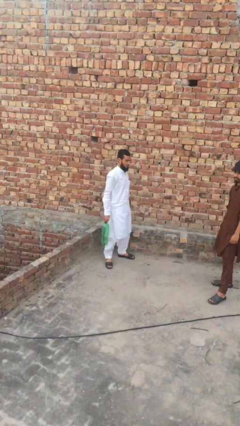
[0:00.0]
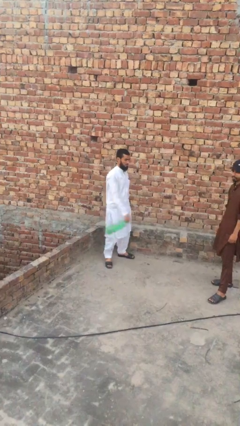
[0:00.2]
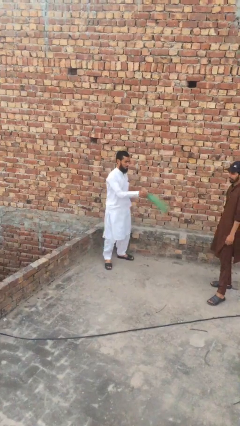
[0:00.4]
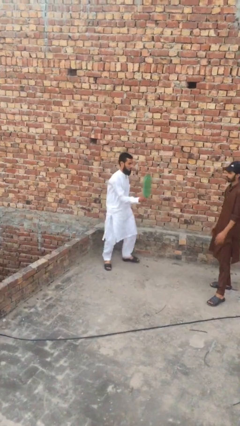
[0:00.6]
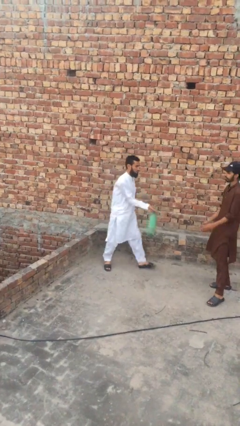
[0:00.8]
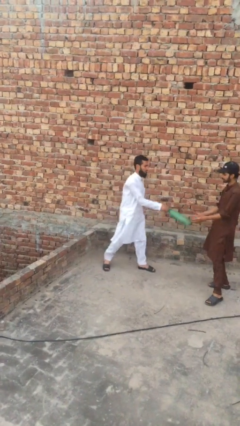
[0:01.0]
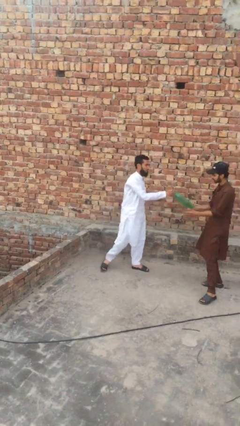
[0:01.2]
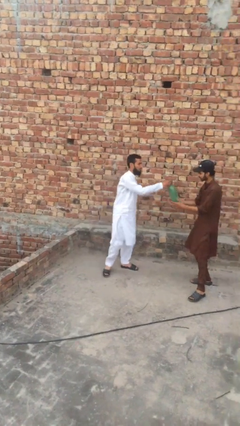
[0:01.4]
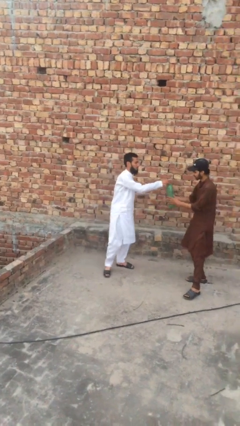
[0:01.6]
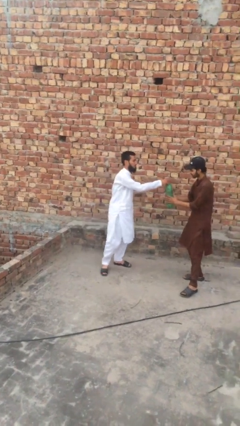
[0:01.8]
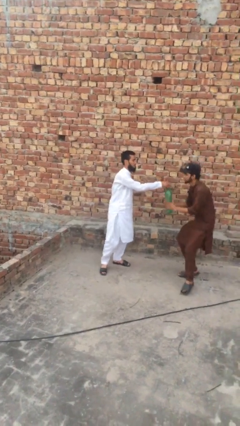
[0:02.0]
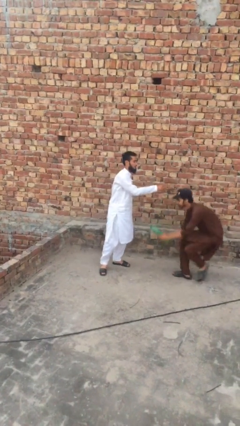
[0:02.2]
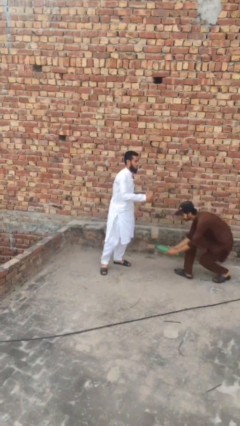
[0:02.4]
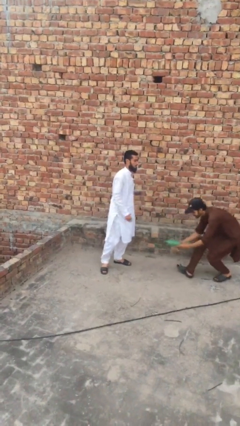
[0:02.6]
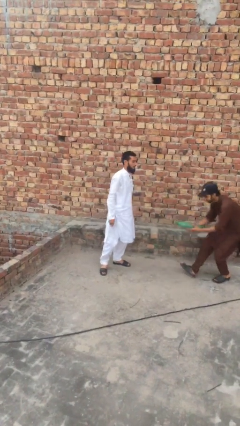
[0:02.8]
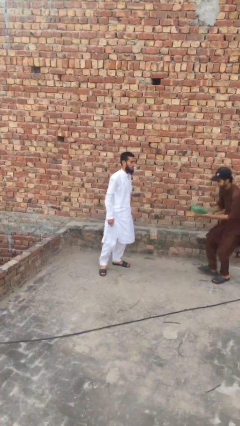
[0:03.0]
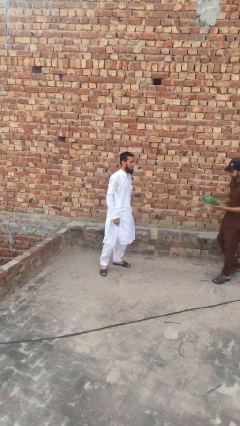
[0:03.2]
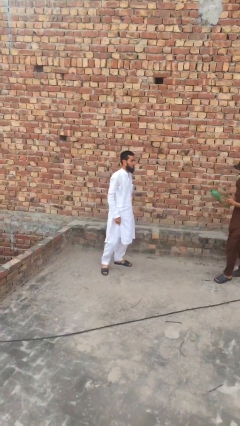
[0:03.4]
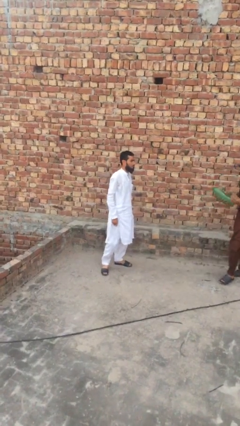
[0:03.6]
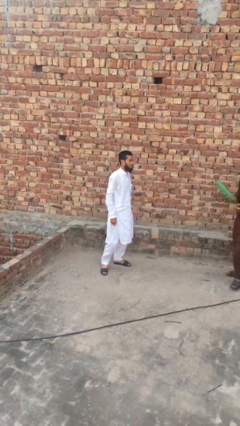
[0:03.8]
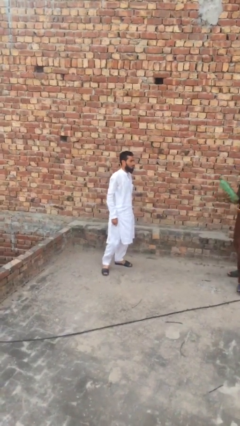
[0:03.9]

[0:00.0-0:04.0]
person transfers object to person

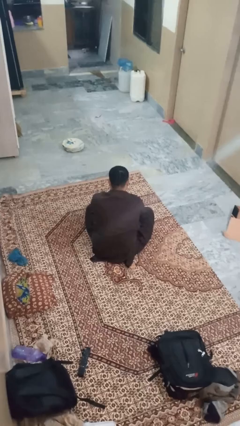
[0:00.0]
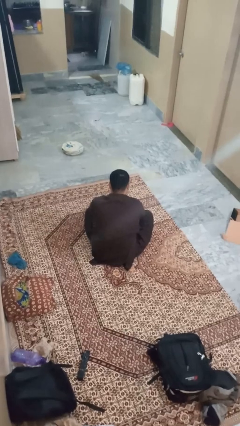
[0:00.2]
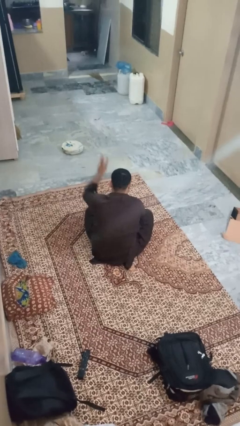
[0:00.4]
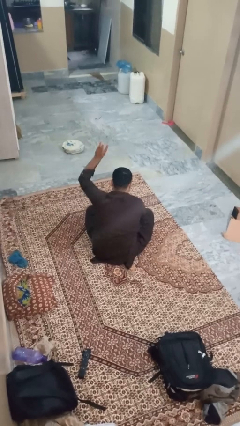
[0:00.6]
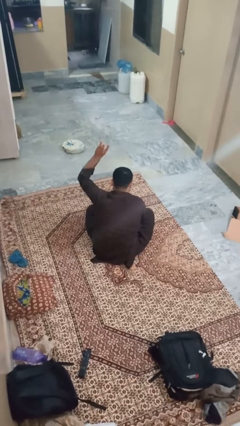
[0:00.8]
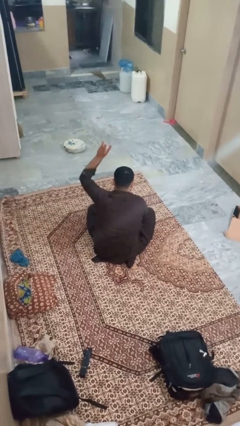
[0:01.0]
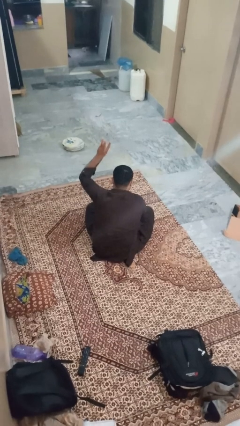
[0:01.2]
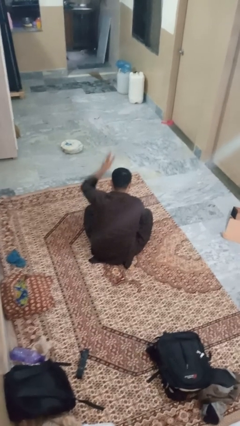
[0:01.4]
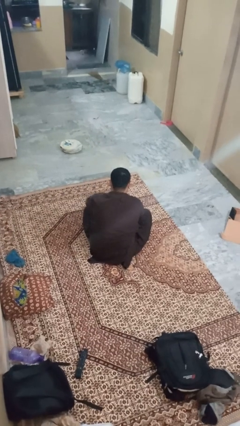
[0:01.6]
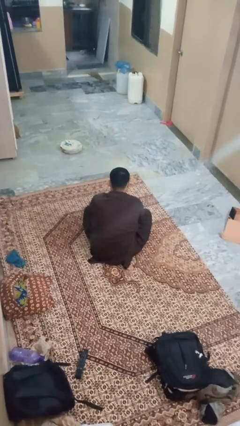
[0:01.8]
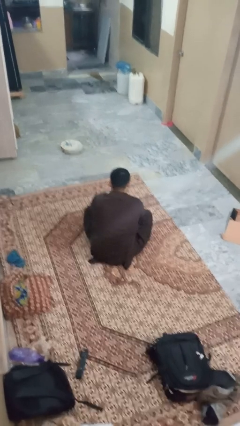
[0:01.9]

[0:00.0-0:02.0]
person gestures number three

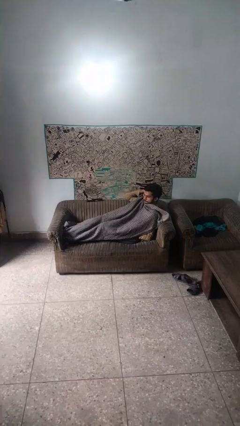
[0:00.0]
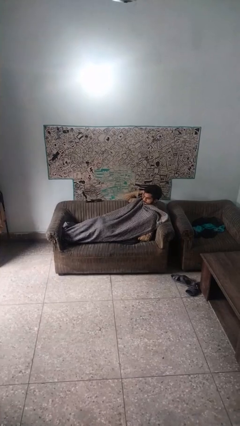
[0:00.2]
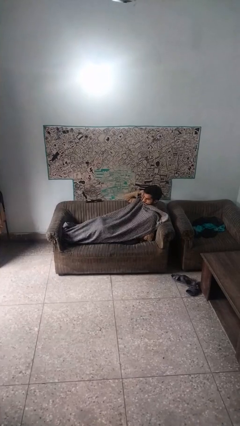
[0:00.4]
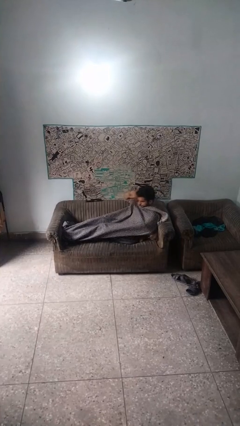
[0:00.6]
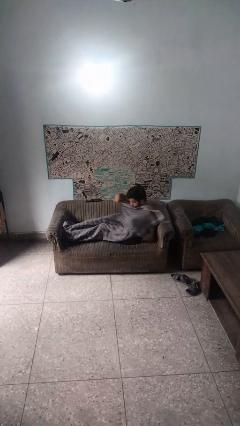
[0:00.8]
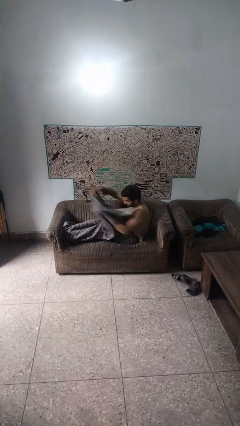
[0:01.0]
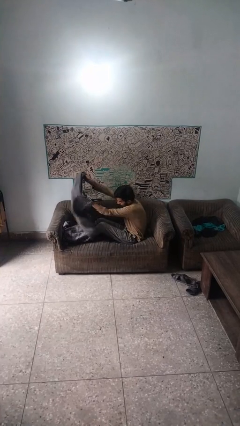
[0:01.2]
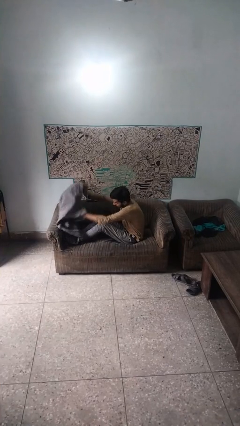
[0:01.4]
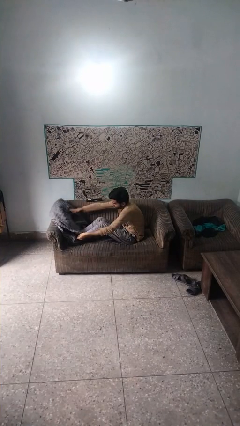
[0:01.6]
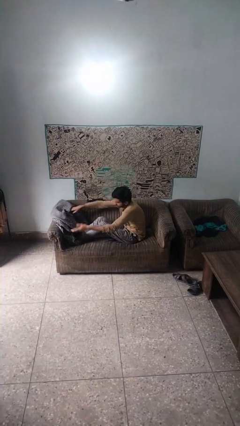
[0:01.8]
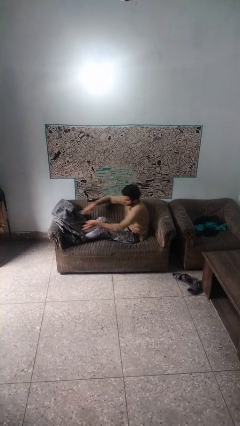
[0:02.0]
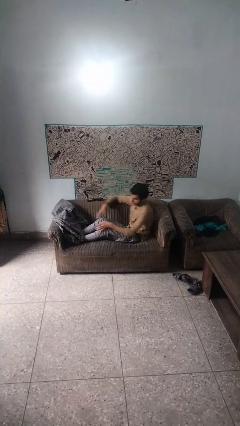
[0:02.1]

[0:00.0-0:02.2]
person uncovers with blanket

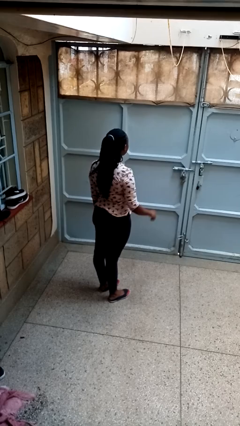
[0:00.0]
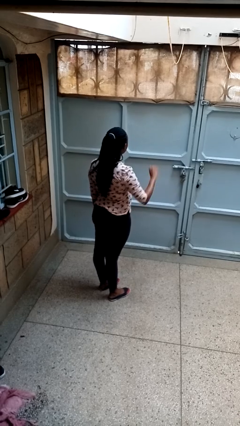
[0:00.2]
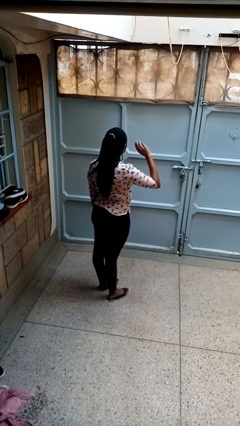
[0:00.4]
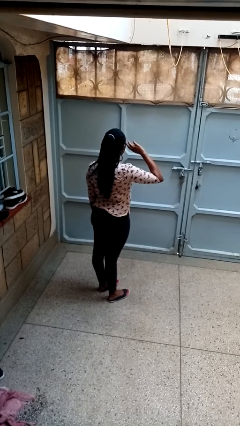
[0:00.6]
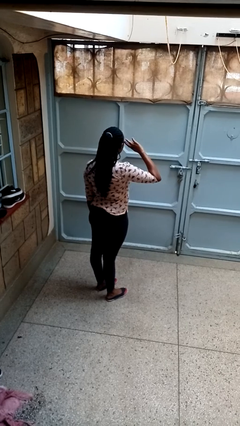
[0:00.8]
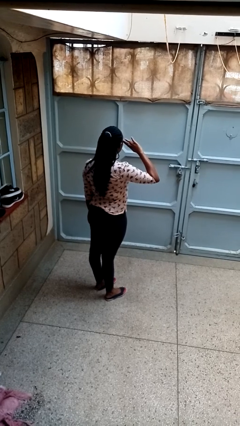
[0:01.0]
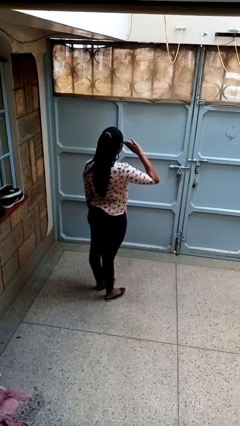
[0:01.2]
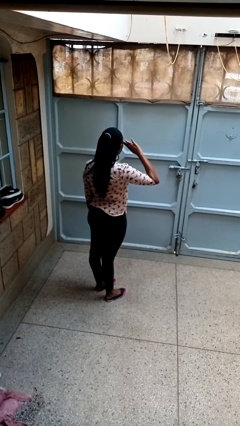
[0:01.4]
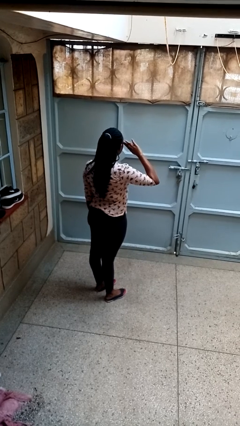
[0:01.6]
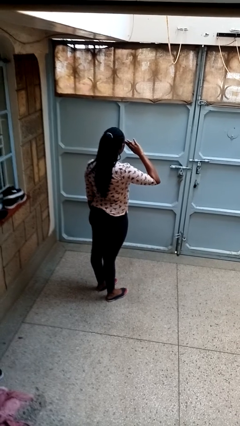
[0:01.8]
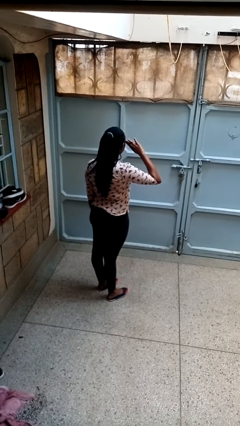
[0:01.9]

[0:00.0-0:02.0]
person salutes

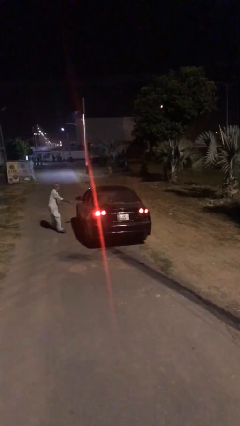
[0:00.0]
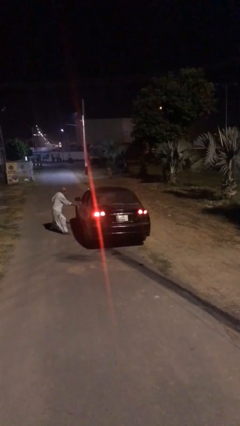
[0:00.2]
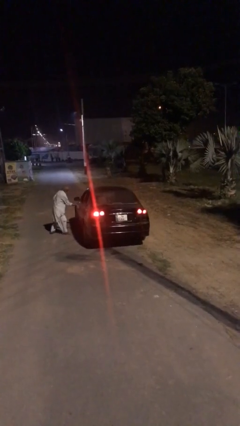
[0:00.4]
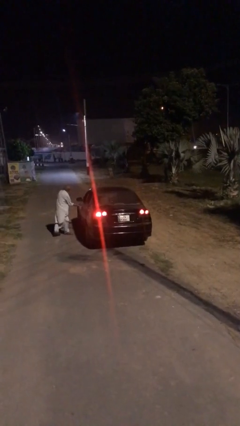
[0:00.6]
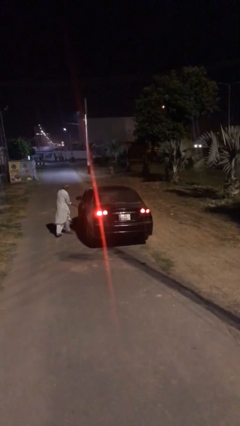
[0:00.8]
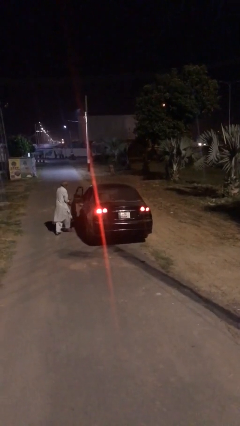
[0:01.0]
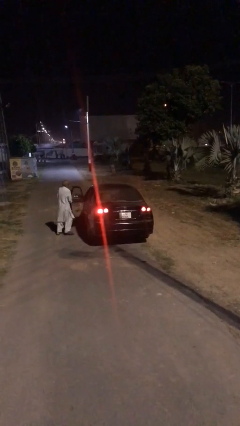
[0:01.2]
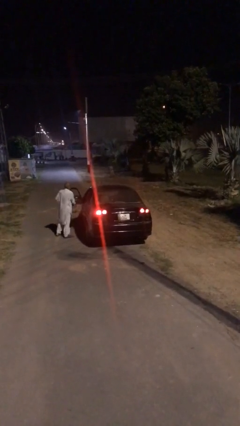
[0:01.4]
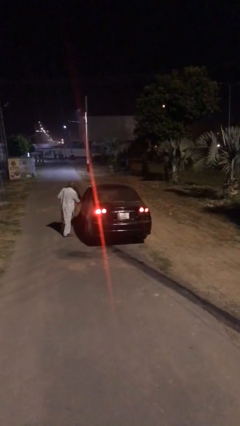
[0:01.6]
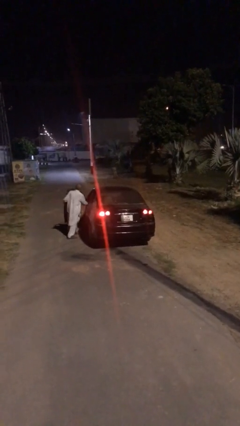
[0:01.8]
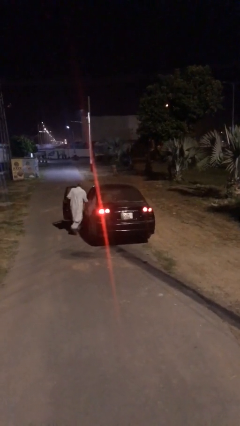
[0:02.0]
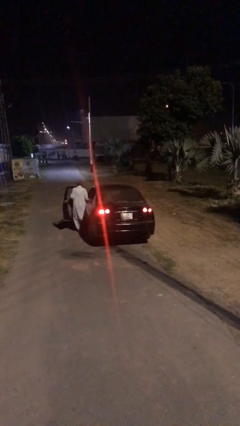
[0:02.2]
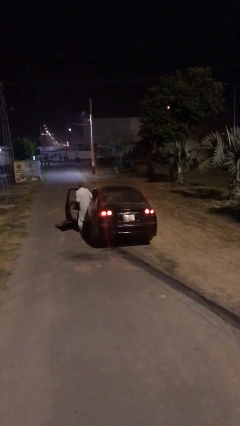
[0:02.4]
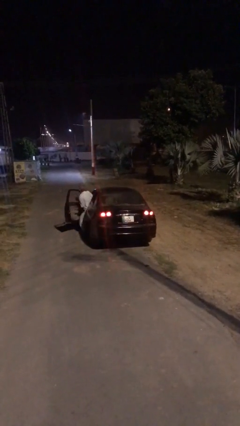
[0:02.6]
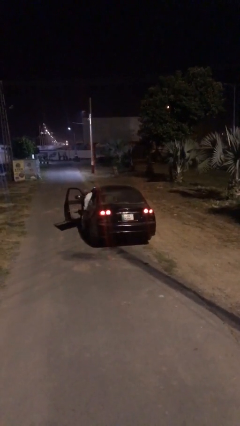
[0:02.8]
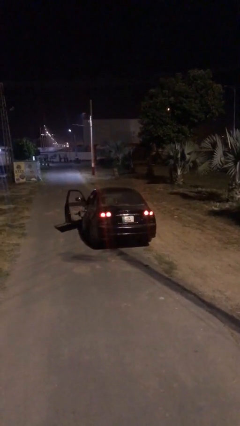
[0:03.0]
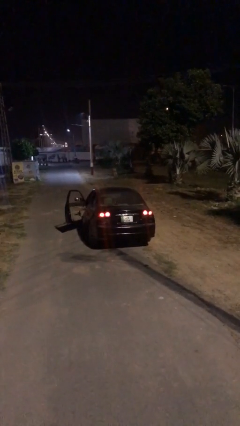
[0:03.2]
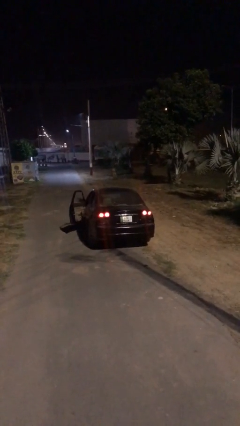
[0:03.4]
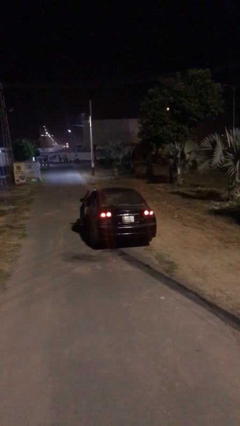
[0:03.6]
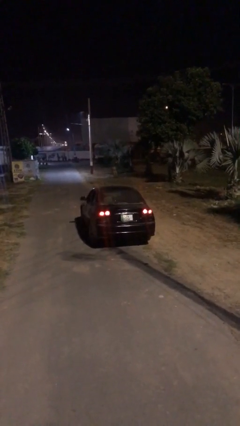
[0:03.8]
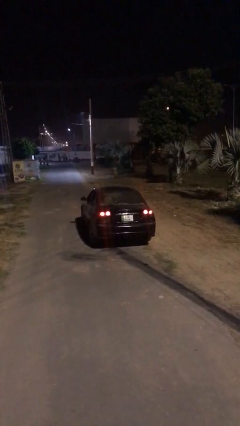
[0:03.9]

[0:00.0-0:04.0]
car picks up person

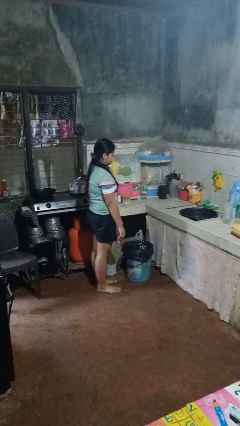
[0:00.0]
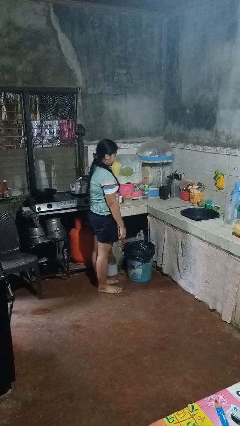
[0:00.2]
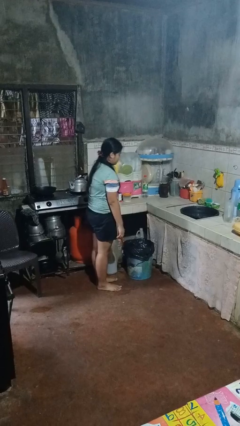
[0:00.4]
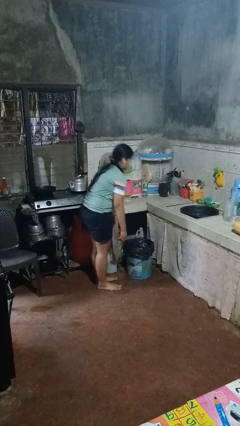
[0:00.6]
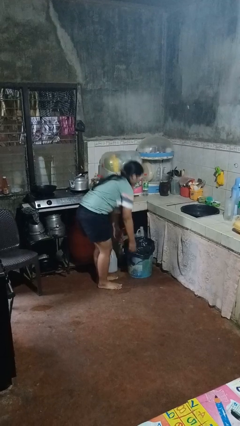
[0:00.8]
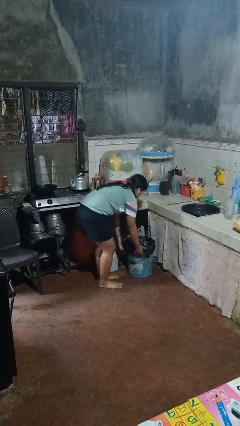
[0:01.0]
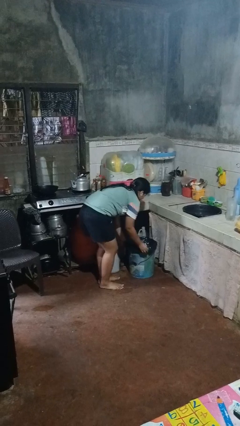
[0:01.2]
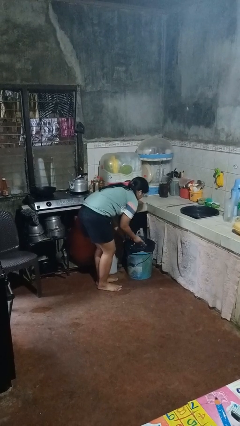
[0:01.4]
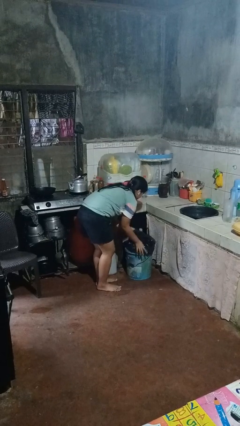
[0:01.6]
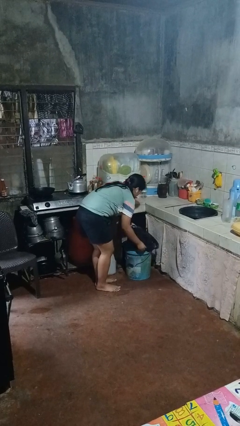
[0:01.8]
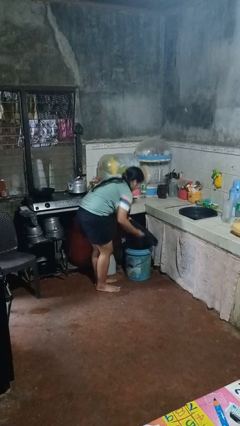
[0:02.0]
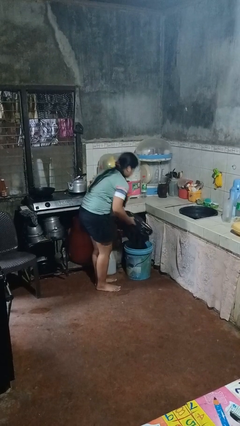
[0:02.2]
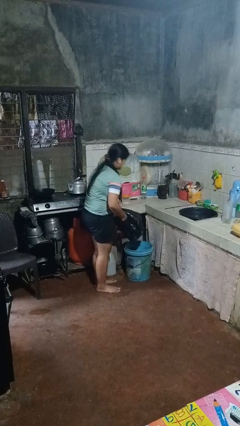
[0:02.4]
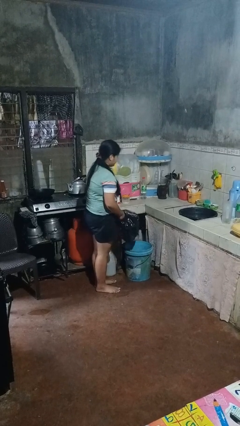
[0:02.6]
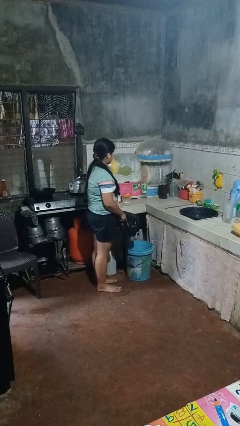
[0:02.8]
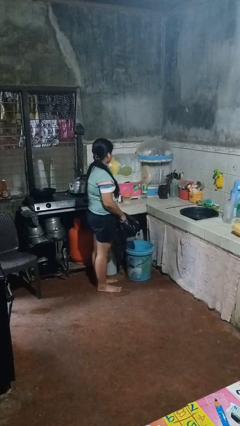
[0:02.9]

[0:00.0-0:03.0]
person removes trashbag from trashcan
